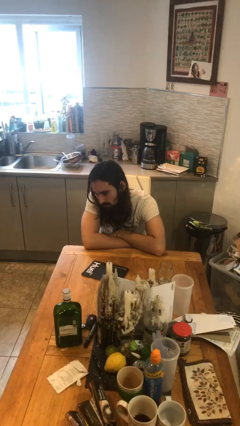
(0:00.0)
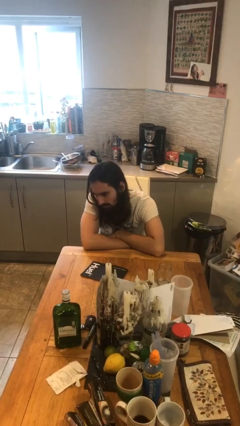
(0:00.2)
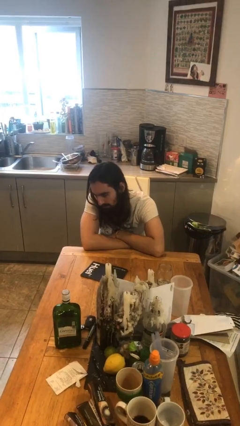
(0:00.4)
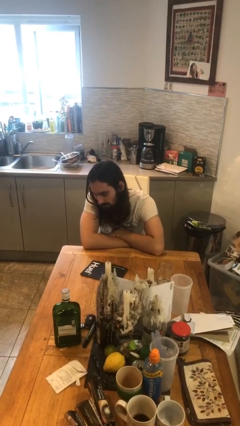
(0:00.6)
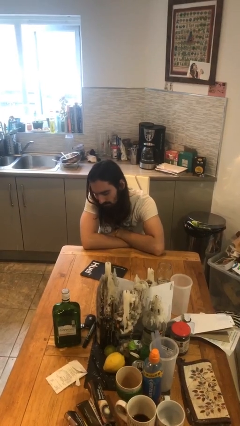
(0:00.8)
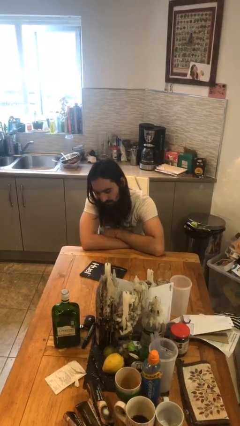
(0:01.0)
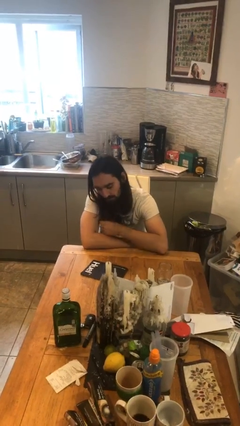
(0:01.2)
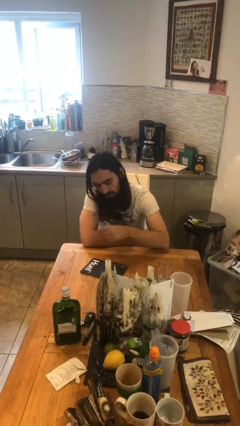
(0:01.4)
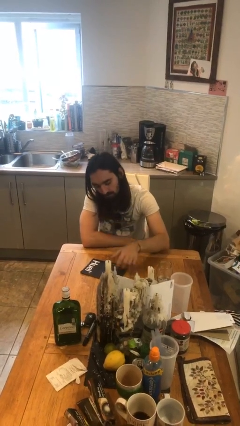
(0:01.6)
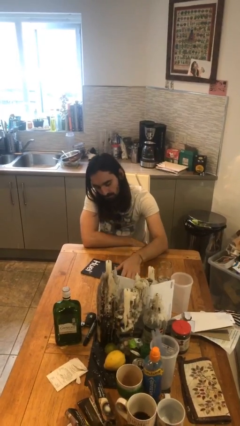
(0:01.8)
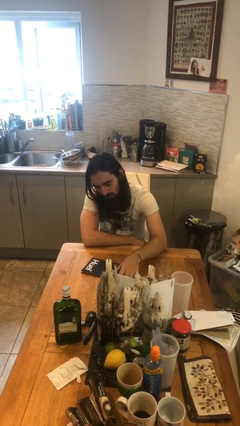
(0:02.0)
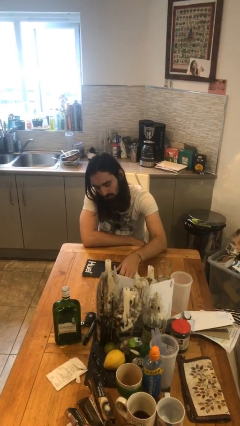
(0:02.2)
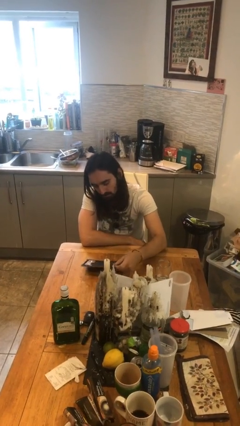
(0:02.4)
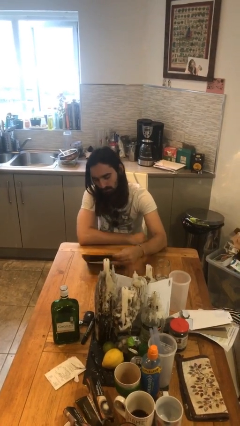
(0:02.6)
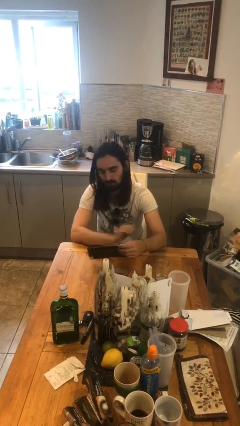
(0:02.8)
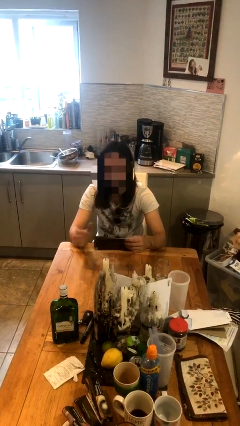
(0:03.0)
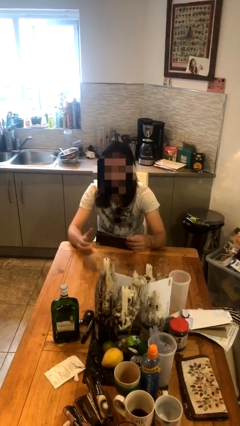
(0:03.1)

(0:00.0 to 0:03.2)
person picks up object from table

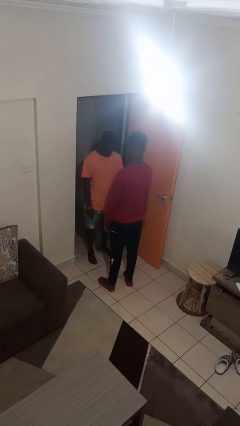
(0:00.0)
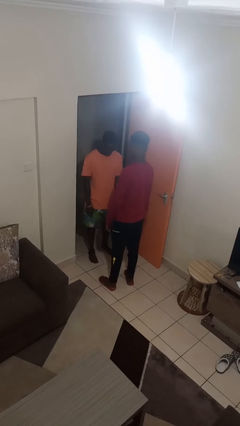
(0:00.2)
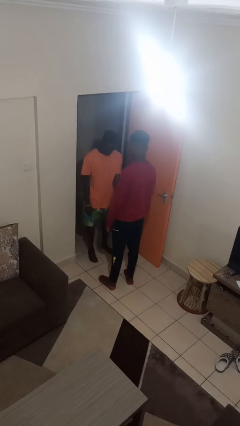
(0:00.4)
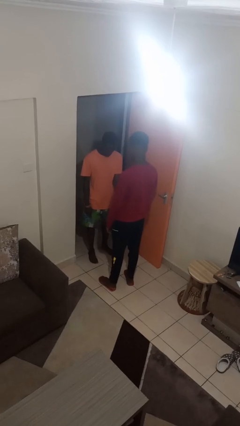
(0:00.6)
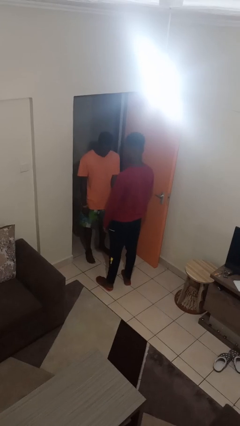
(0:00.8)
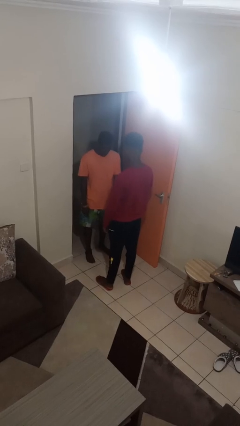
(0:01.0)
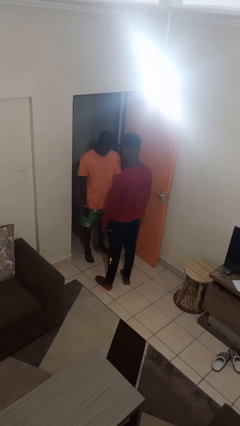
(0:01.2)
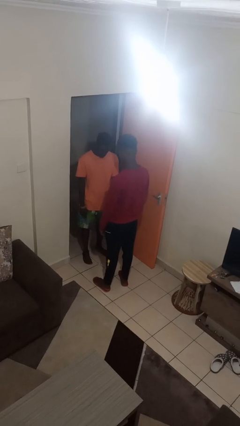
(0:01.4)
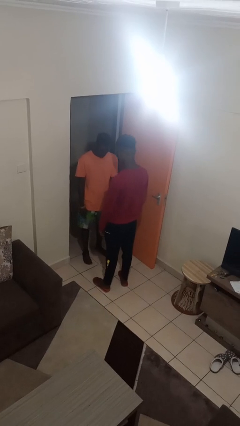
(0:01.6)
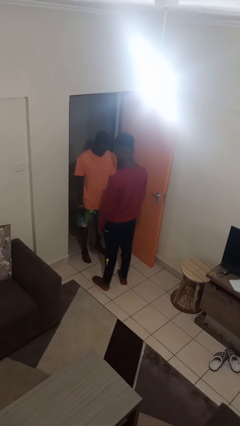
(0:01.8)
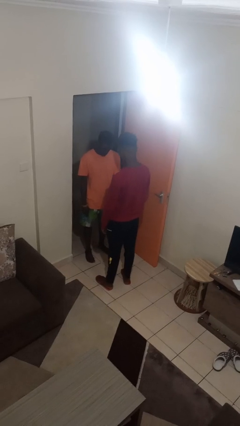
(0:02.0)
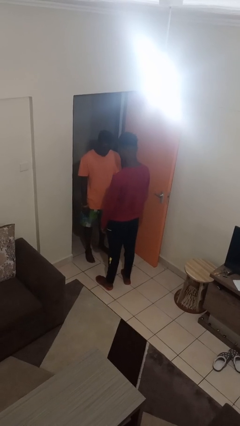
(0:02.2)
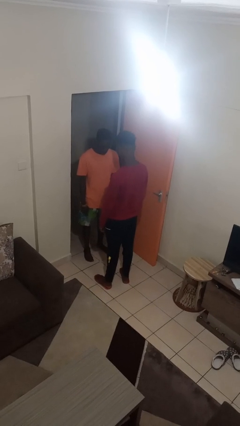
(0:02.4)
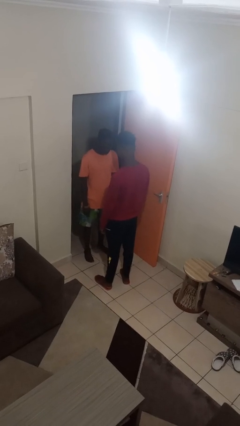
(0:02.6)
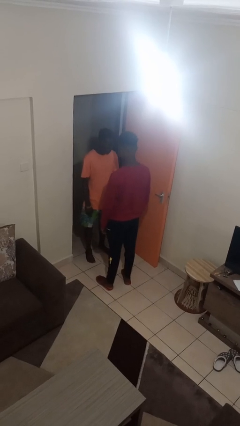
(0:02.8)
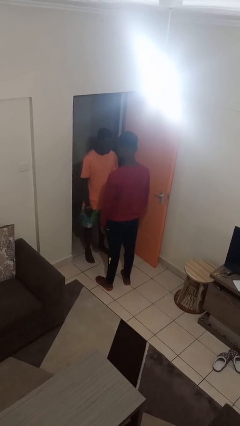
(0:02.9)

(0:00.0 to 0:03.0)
person grabs person by forearm

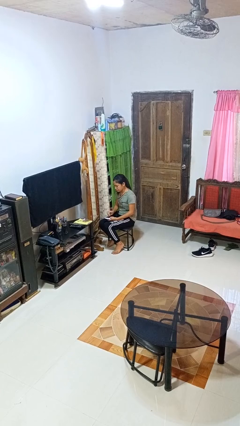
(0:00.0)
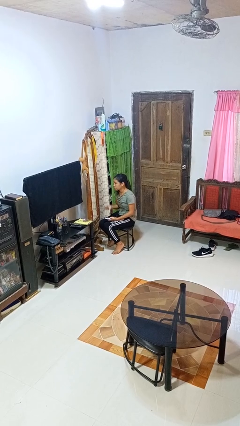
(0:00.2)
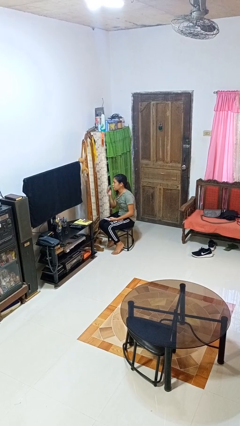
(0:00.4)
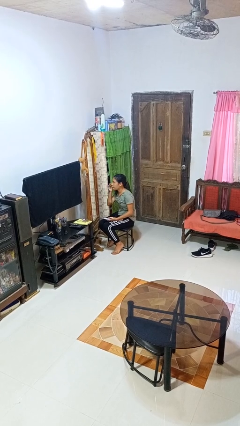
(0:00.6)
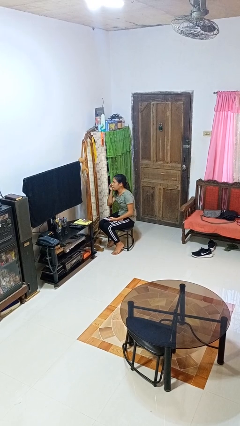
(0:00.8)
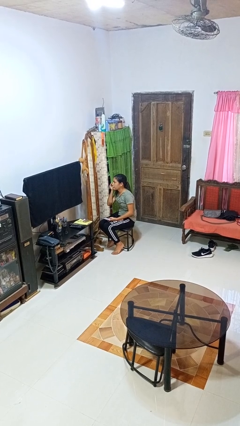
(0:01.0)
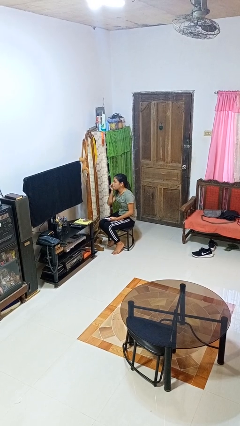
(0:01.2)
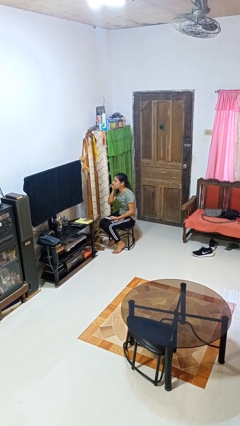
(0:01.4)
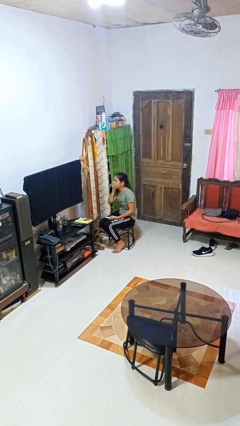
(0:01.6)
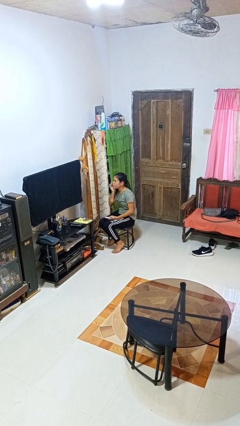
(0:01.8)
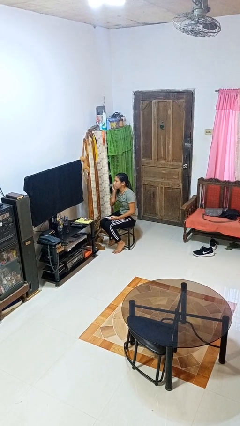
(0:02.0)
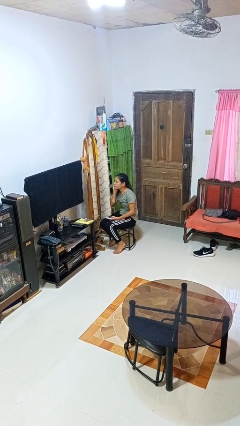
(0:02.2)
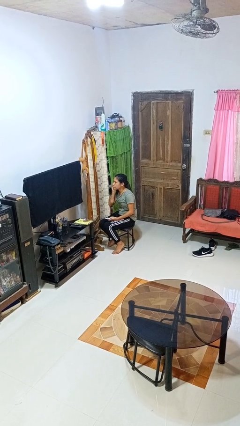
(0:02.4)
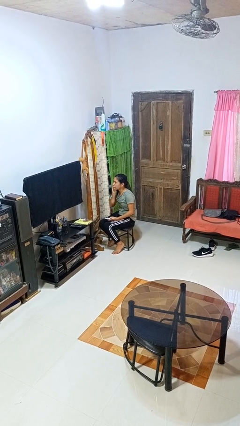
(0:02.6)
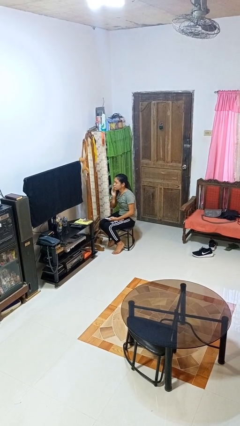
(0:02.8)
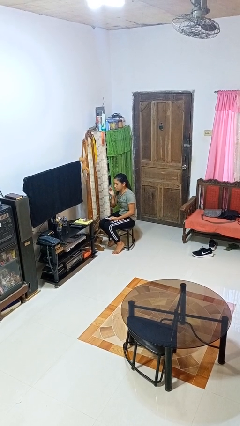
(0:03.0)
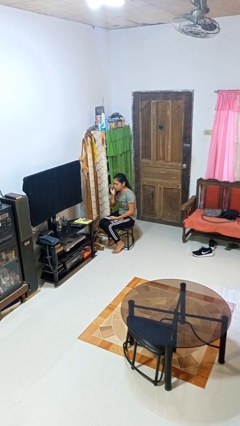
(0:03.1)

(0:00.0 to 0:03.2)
person applies foundation makeup

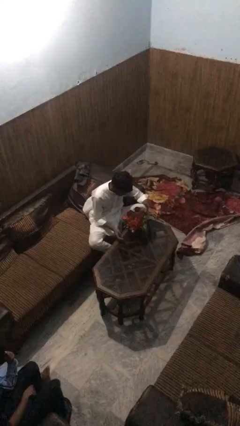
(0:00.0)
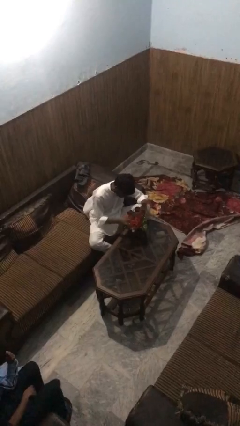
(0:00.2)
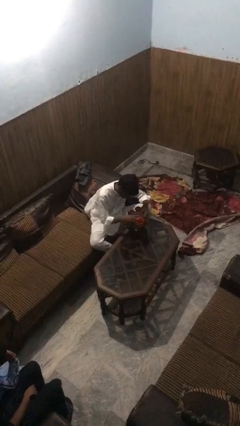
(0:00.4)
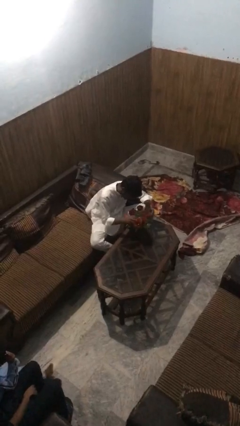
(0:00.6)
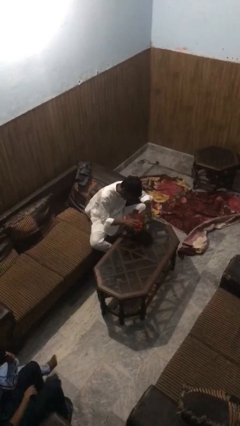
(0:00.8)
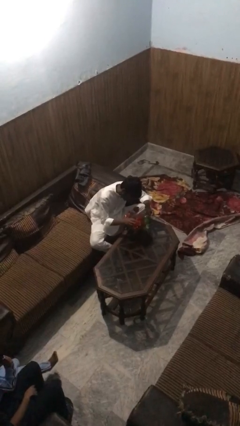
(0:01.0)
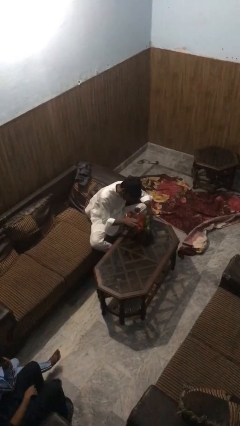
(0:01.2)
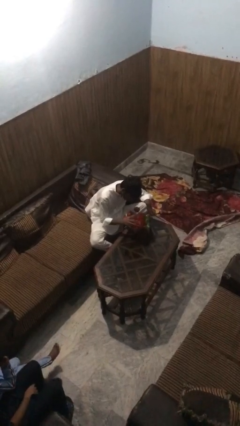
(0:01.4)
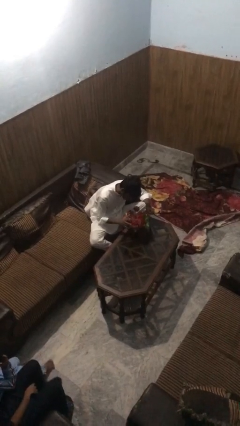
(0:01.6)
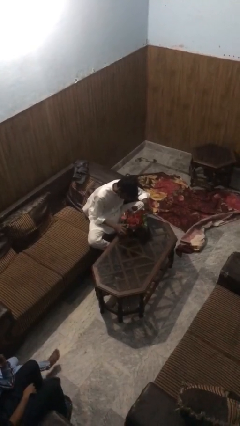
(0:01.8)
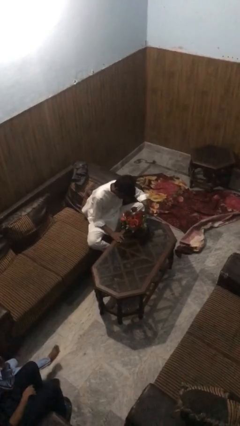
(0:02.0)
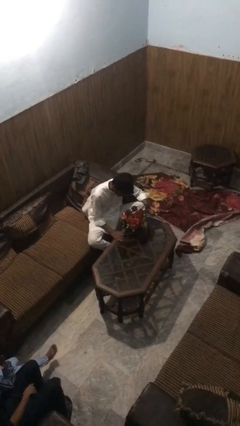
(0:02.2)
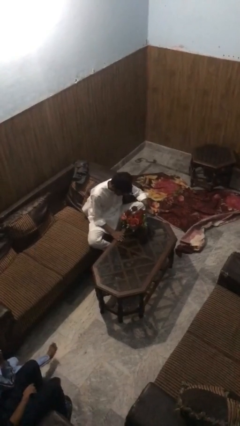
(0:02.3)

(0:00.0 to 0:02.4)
person arranges flowers in vase

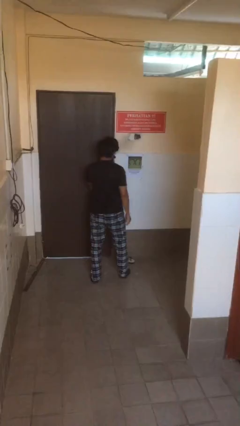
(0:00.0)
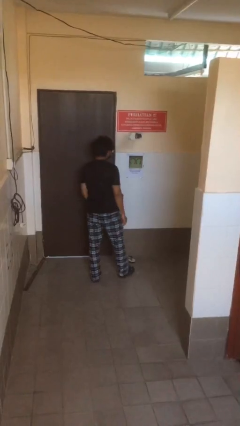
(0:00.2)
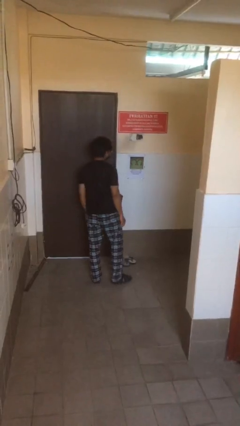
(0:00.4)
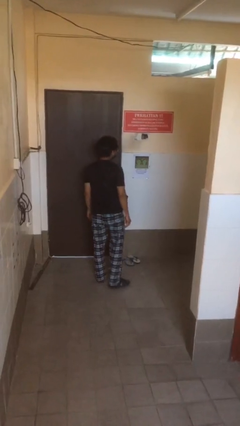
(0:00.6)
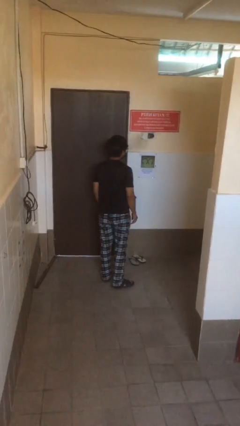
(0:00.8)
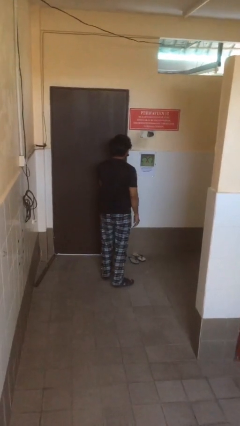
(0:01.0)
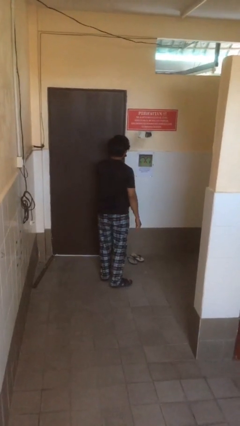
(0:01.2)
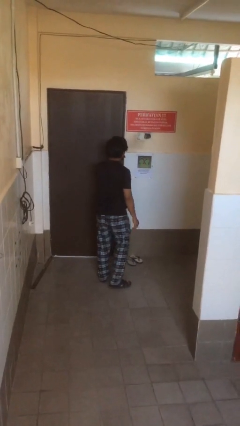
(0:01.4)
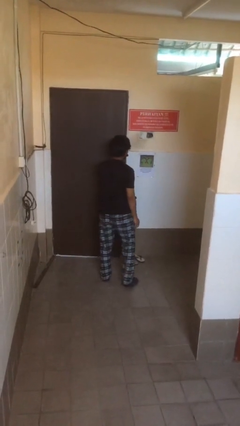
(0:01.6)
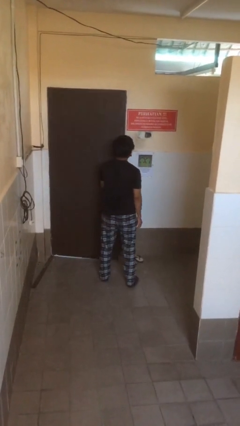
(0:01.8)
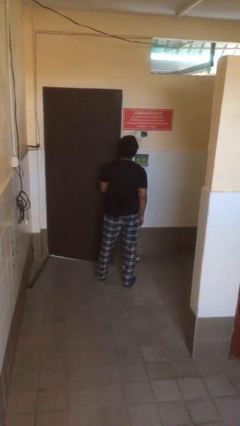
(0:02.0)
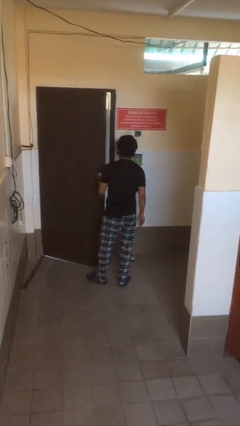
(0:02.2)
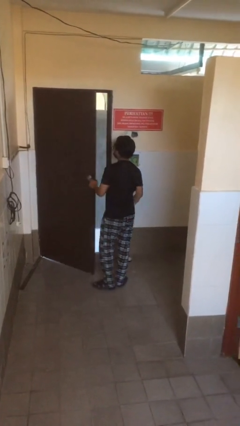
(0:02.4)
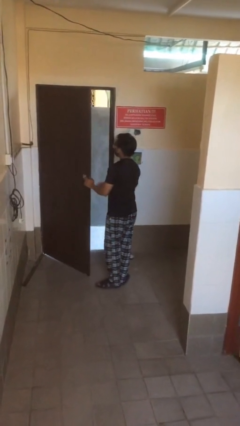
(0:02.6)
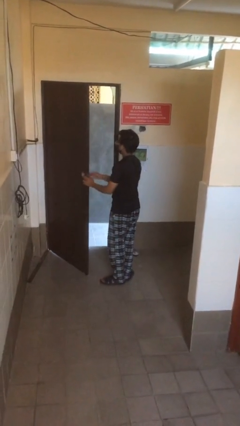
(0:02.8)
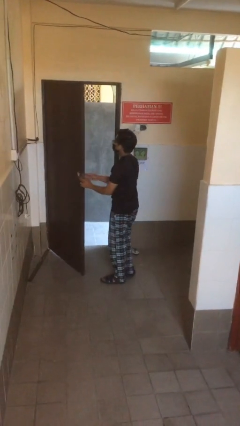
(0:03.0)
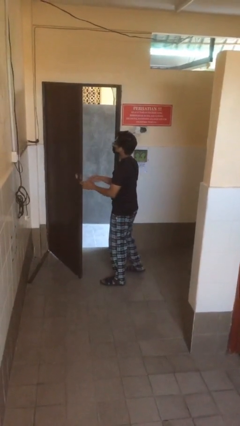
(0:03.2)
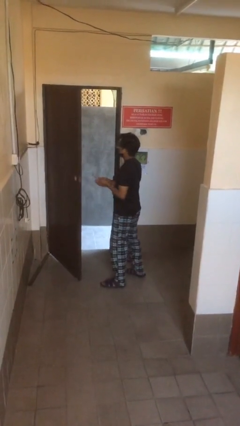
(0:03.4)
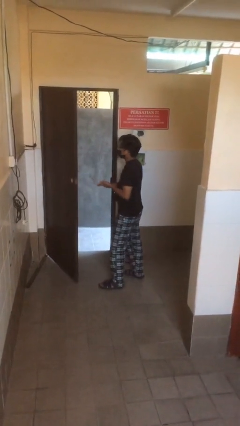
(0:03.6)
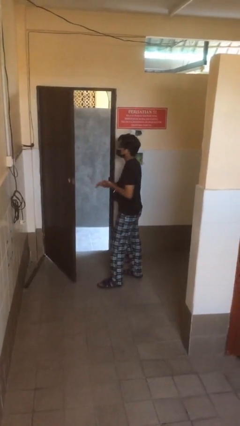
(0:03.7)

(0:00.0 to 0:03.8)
person opens facility door

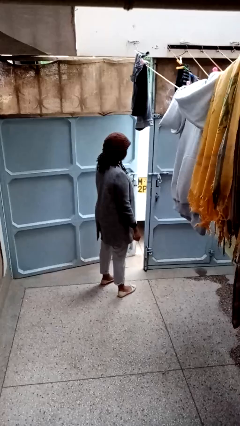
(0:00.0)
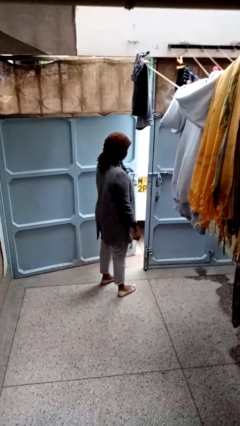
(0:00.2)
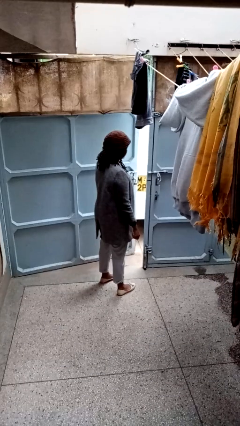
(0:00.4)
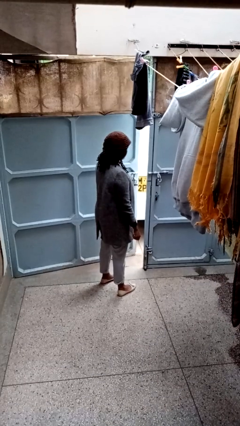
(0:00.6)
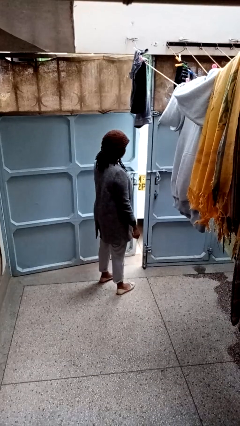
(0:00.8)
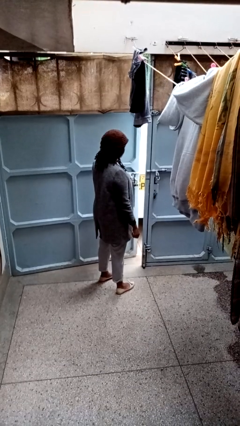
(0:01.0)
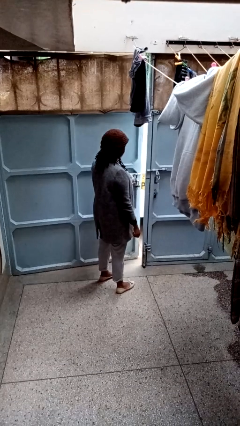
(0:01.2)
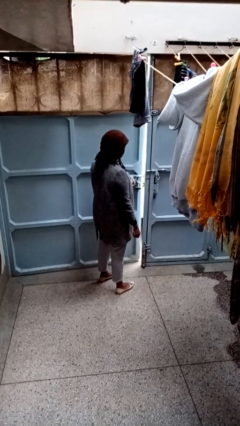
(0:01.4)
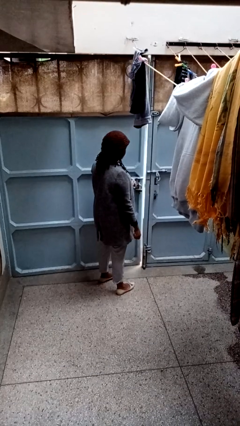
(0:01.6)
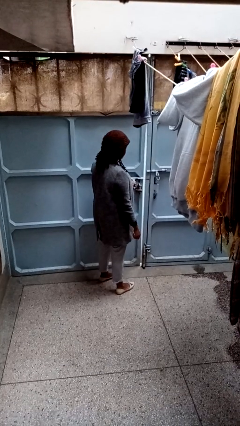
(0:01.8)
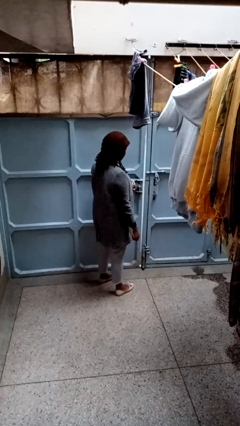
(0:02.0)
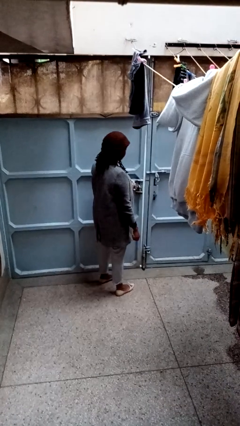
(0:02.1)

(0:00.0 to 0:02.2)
person closes gate
